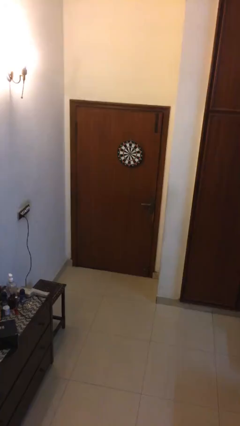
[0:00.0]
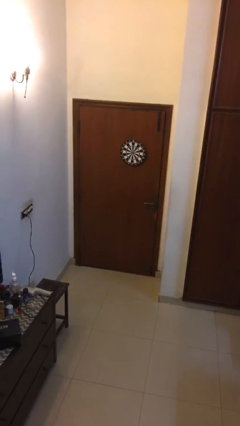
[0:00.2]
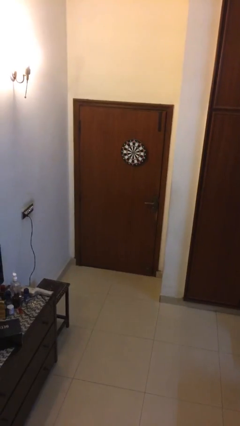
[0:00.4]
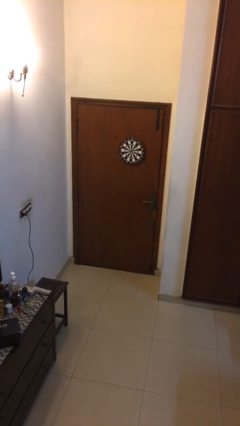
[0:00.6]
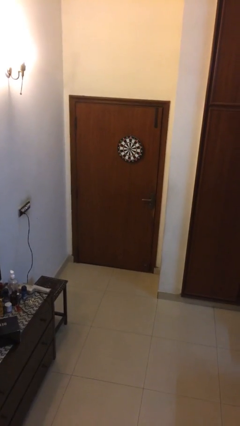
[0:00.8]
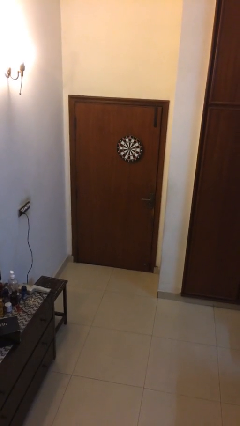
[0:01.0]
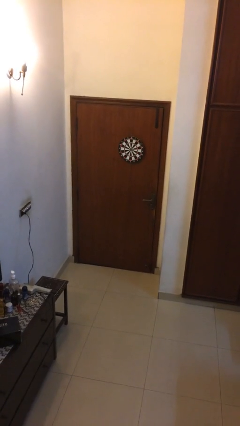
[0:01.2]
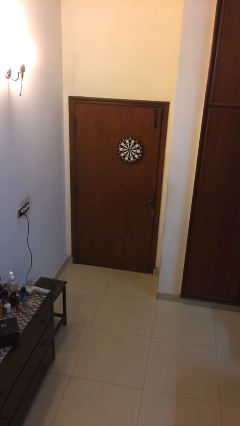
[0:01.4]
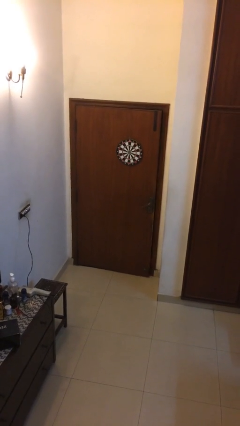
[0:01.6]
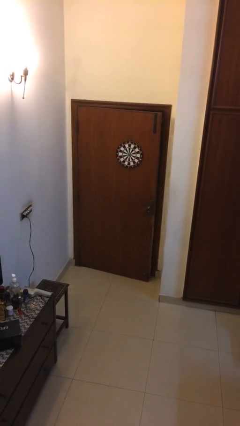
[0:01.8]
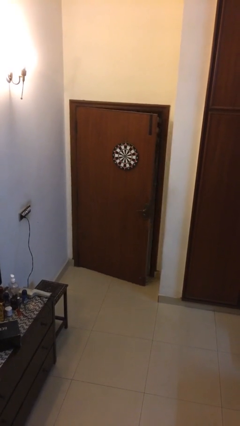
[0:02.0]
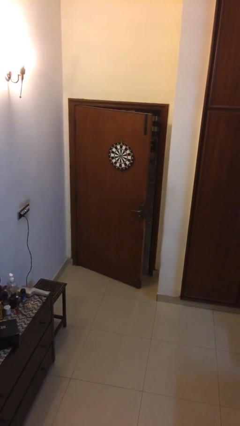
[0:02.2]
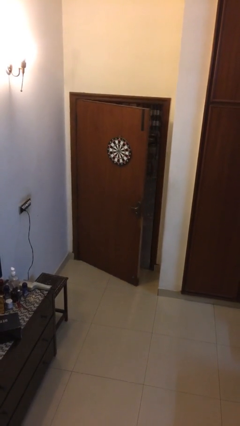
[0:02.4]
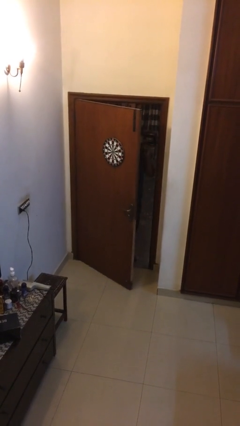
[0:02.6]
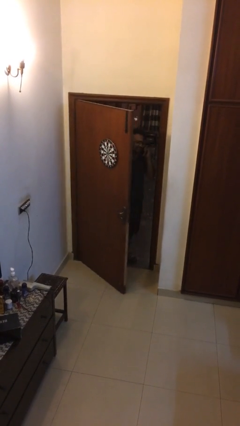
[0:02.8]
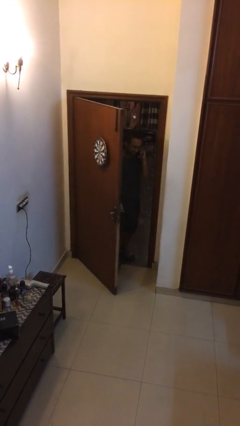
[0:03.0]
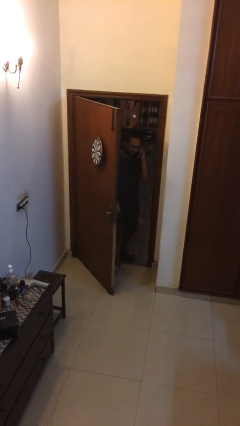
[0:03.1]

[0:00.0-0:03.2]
person opens facility door

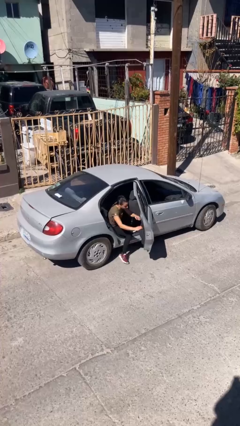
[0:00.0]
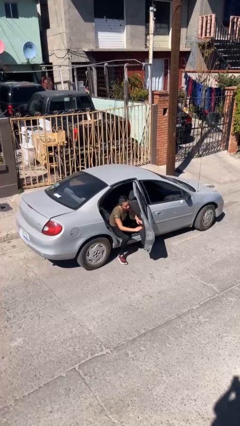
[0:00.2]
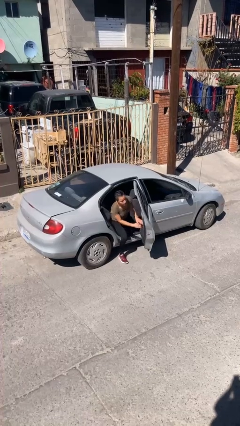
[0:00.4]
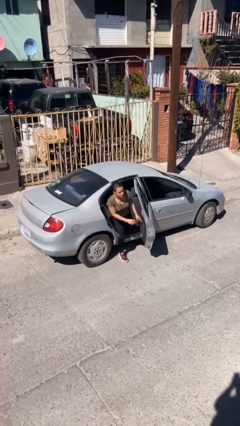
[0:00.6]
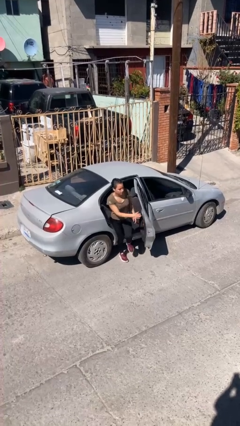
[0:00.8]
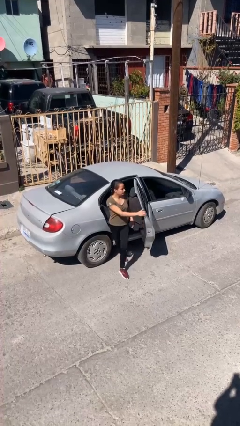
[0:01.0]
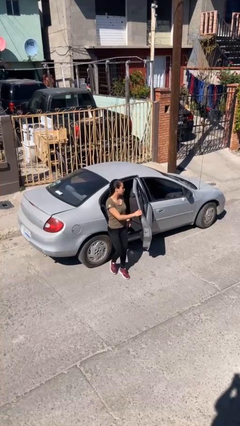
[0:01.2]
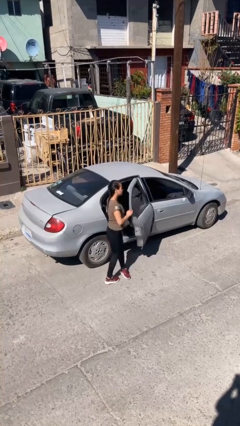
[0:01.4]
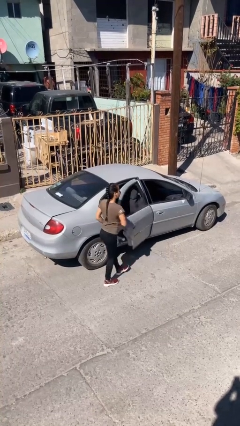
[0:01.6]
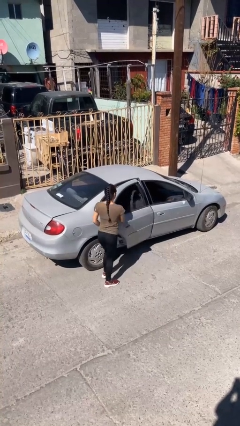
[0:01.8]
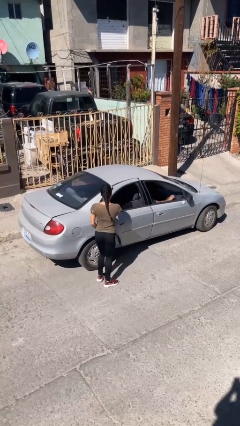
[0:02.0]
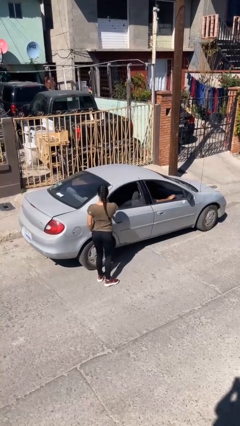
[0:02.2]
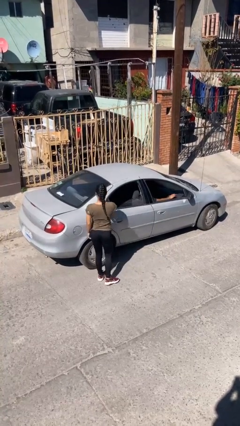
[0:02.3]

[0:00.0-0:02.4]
car drops off person

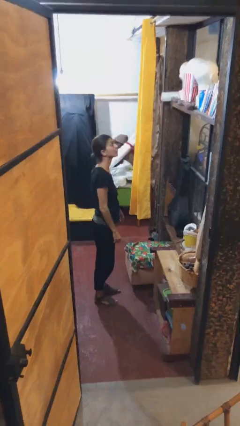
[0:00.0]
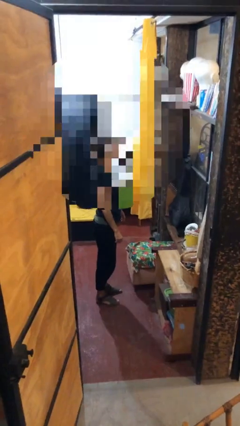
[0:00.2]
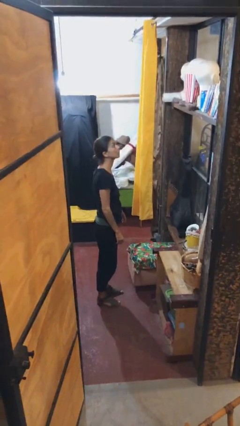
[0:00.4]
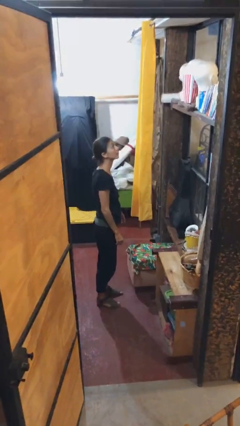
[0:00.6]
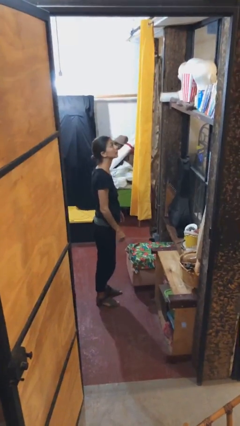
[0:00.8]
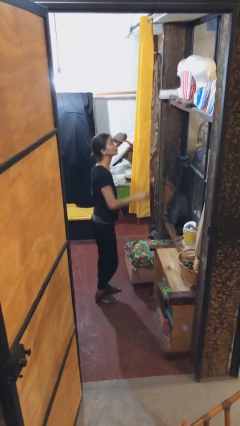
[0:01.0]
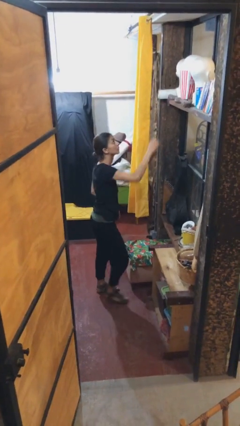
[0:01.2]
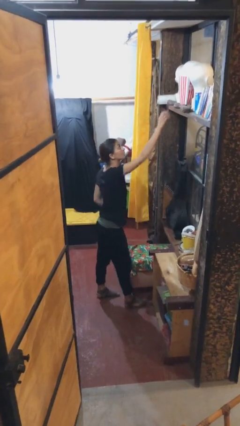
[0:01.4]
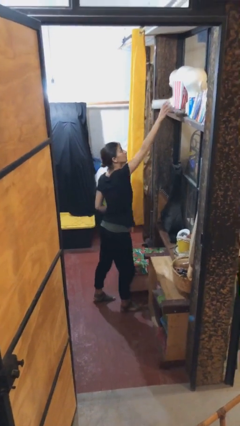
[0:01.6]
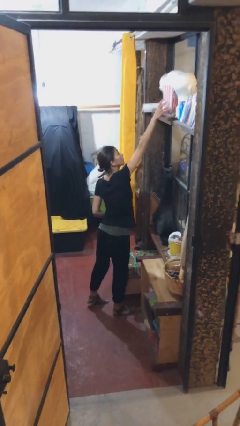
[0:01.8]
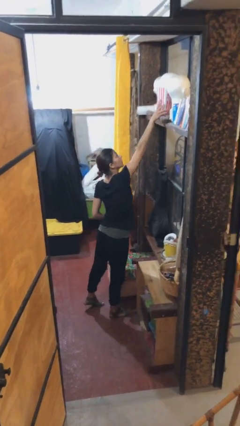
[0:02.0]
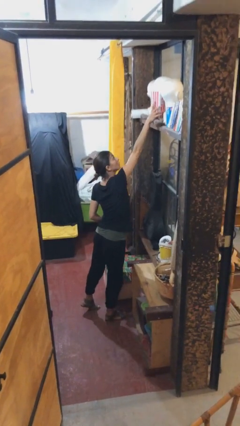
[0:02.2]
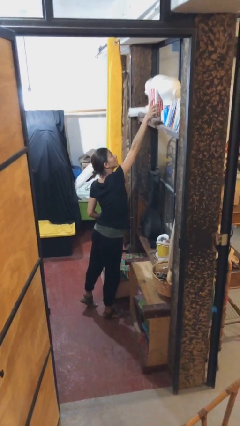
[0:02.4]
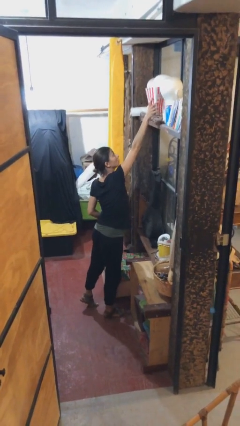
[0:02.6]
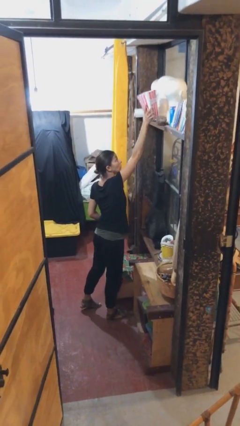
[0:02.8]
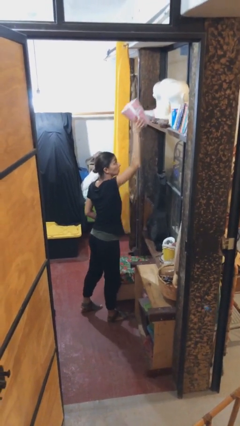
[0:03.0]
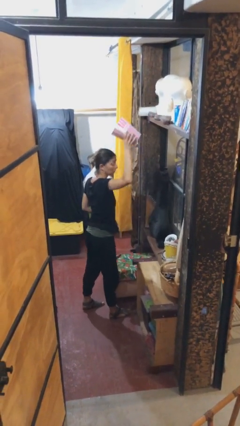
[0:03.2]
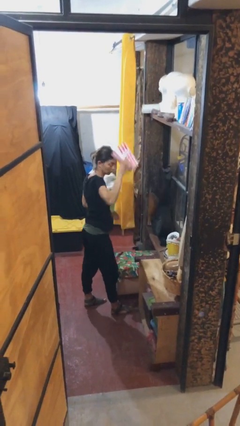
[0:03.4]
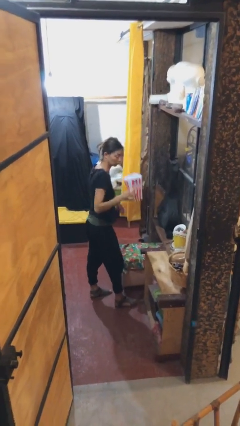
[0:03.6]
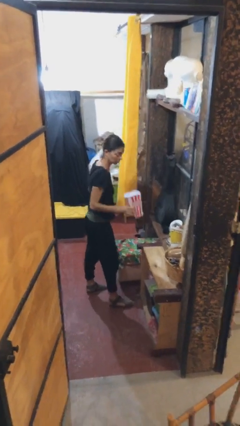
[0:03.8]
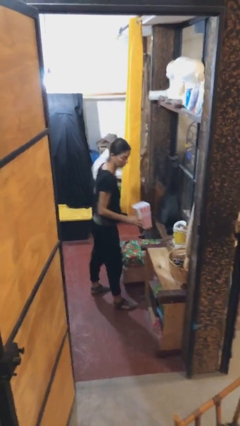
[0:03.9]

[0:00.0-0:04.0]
person picks up object from shelf

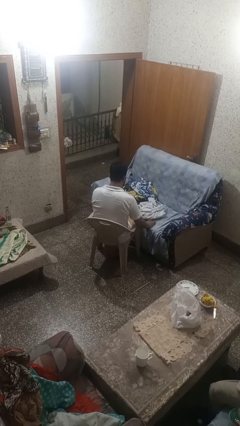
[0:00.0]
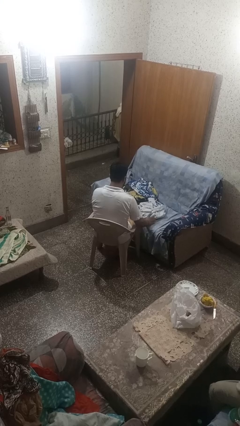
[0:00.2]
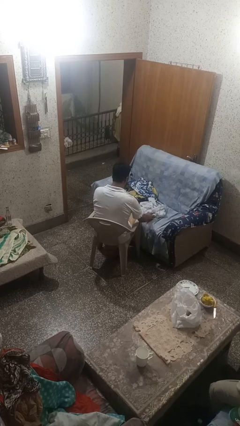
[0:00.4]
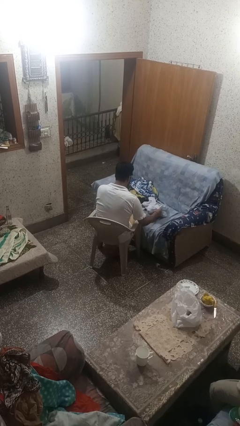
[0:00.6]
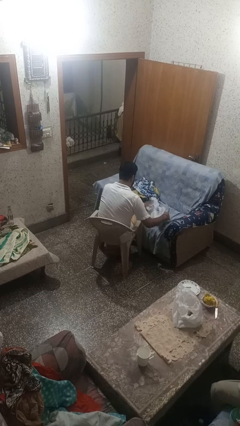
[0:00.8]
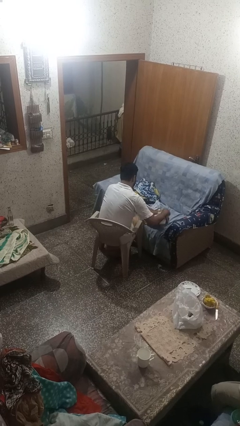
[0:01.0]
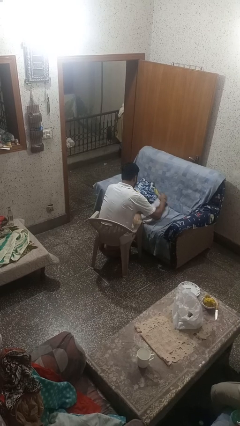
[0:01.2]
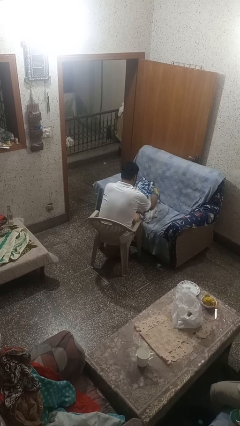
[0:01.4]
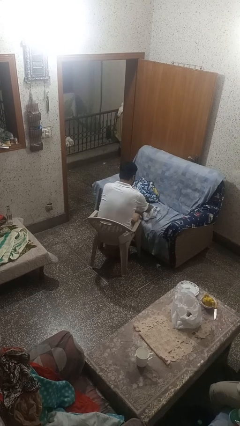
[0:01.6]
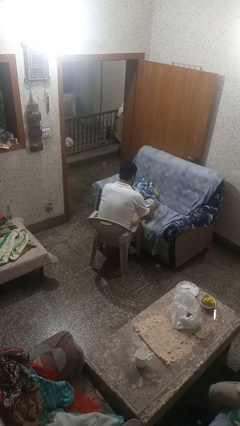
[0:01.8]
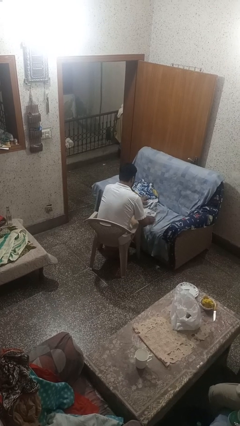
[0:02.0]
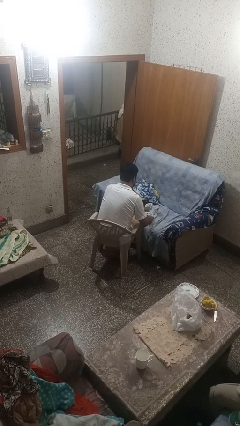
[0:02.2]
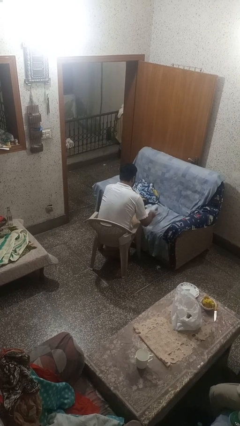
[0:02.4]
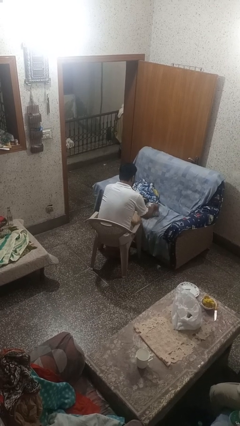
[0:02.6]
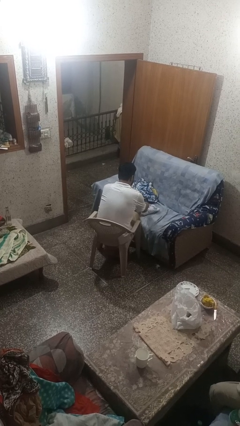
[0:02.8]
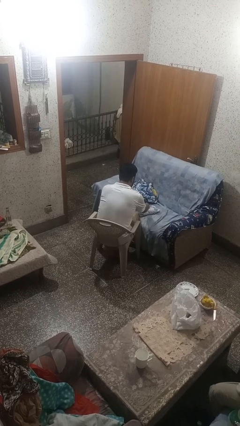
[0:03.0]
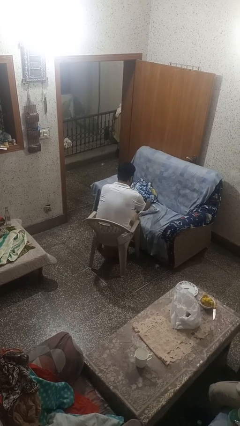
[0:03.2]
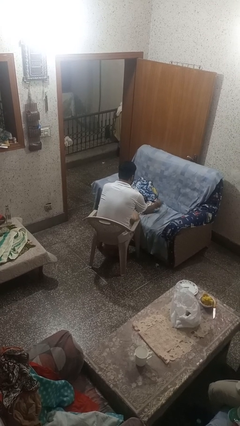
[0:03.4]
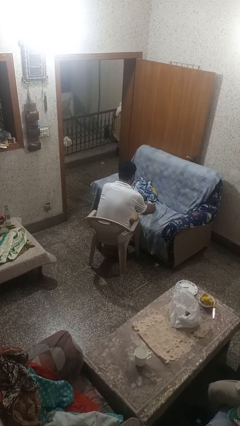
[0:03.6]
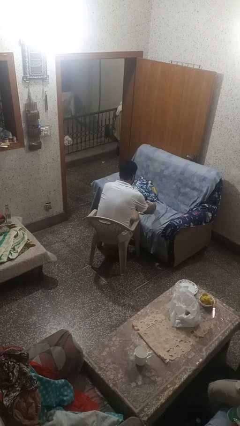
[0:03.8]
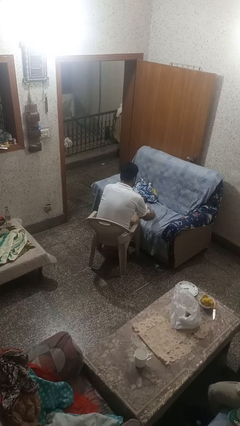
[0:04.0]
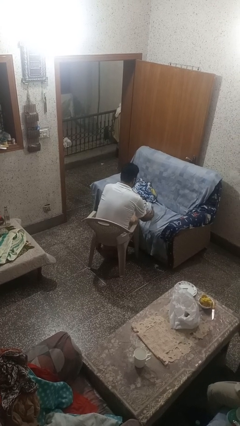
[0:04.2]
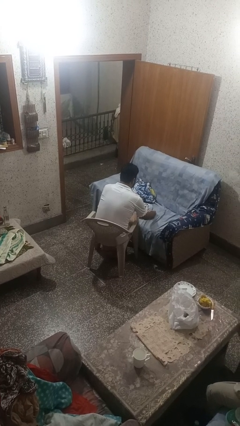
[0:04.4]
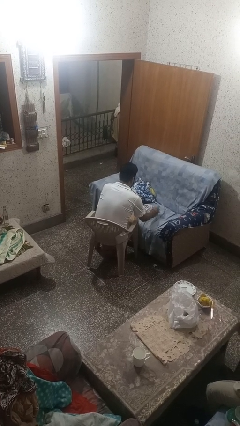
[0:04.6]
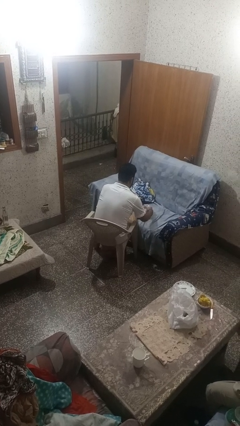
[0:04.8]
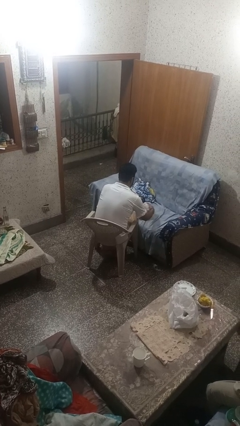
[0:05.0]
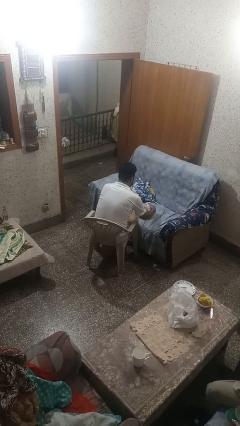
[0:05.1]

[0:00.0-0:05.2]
person folds shirt

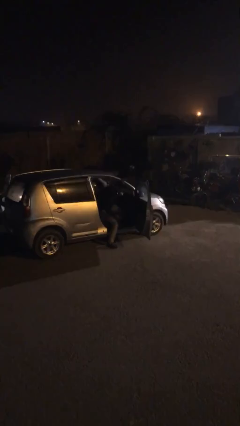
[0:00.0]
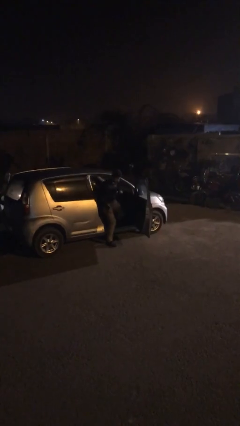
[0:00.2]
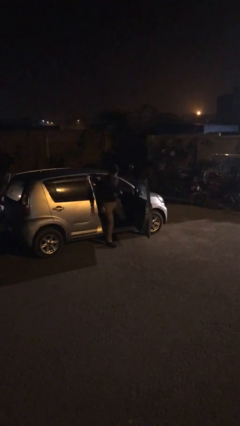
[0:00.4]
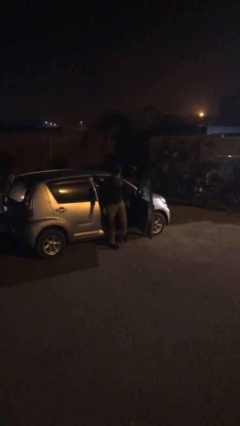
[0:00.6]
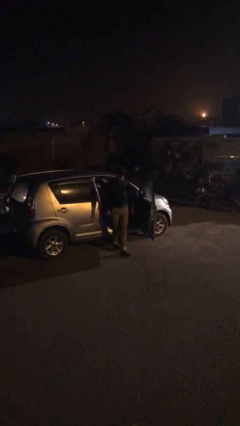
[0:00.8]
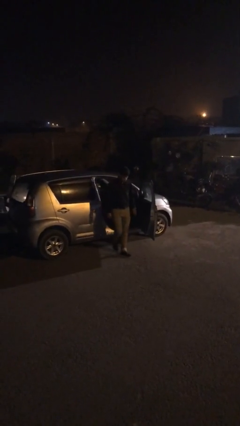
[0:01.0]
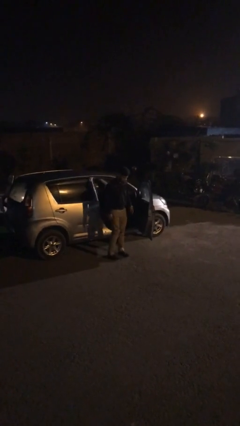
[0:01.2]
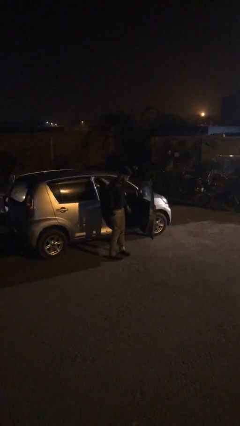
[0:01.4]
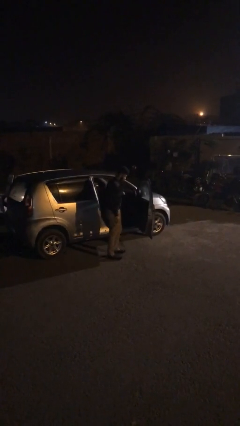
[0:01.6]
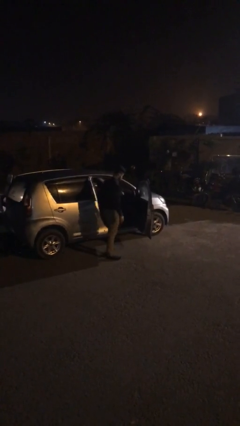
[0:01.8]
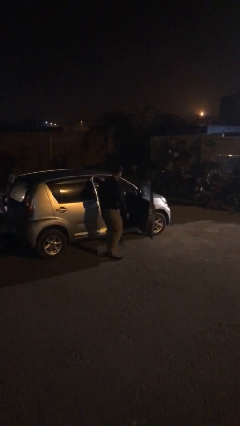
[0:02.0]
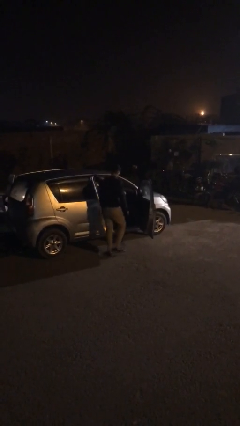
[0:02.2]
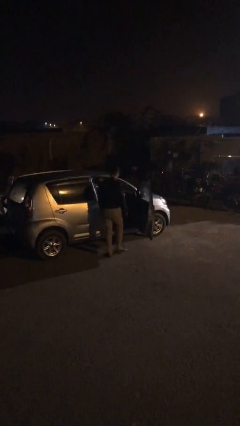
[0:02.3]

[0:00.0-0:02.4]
person exits car

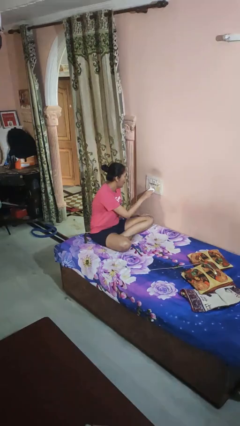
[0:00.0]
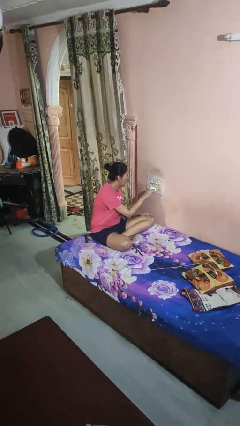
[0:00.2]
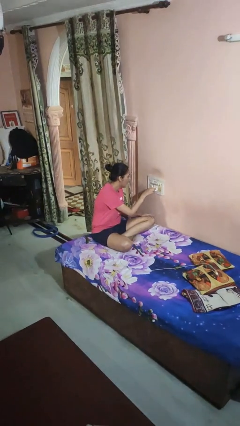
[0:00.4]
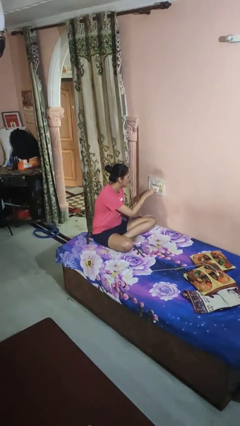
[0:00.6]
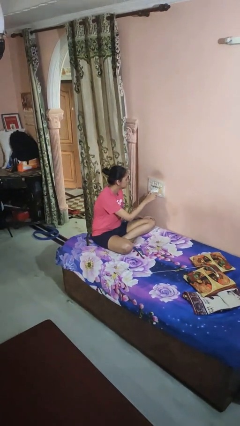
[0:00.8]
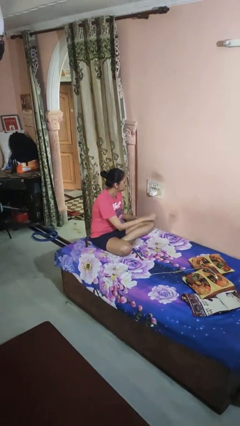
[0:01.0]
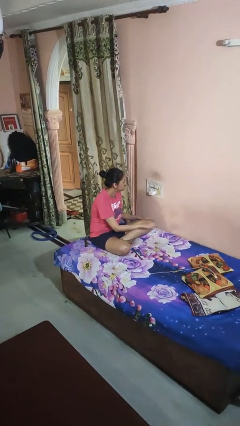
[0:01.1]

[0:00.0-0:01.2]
person plugs into electrical socket
